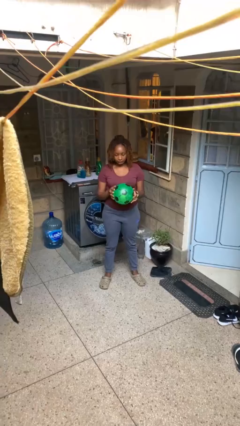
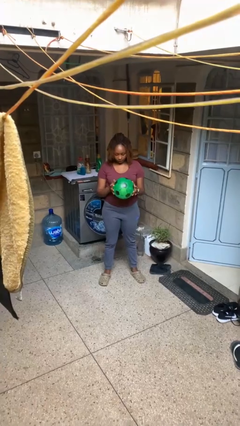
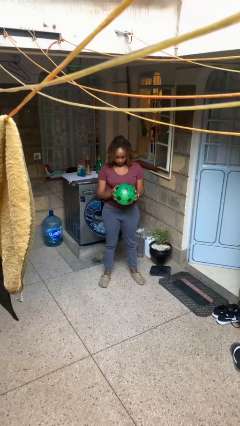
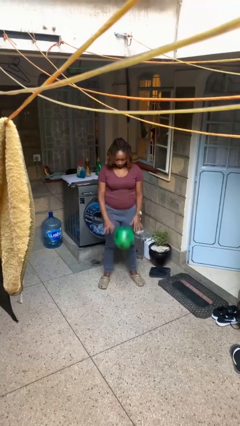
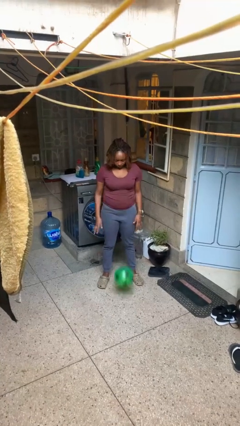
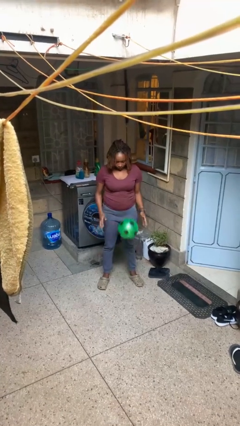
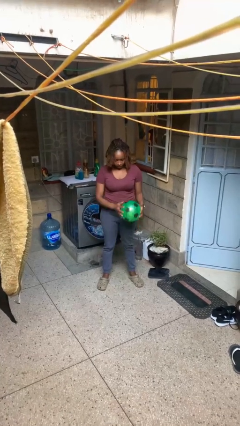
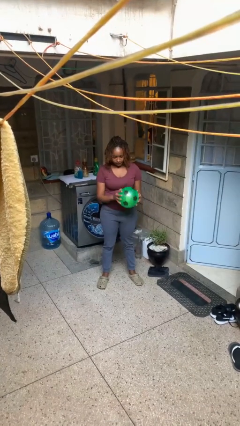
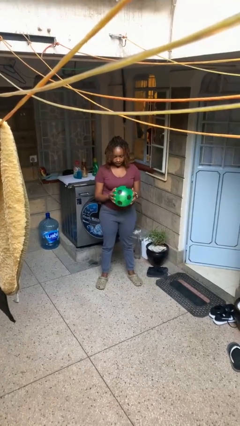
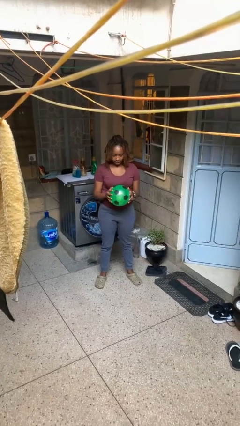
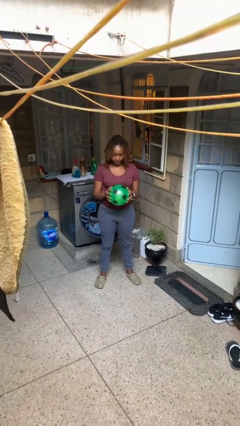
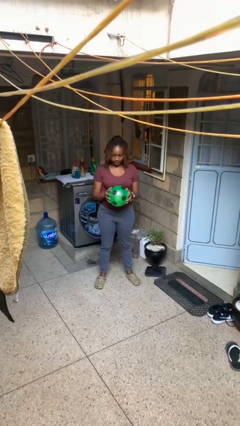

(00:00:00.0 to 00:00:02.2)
person bounces ball on floor

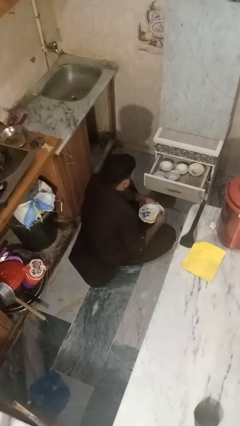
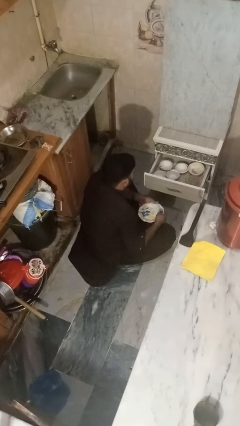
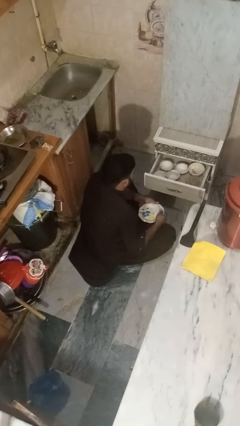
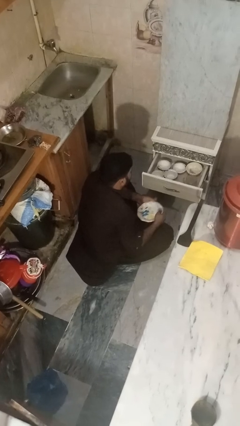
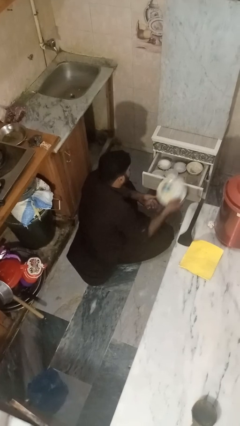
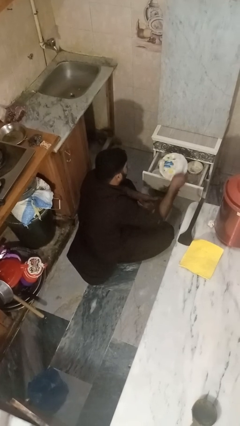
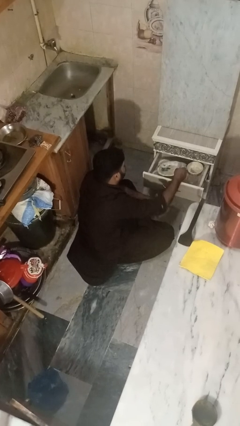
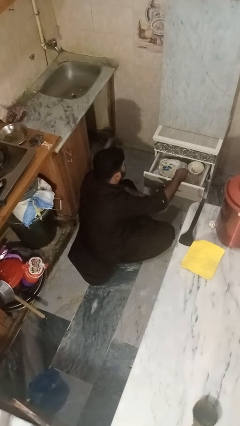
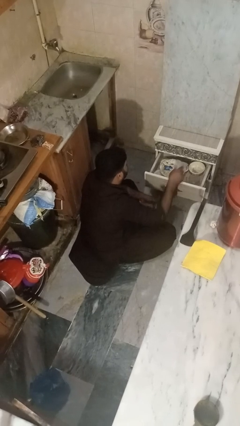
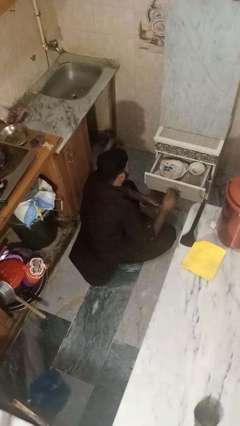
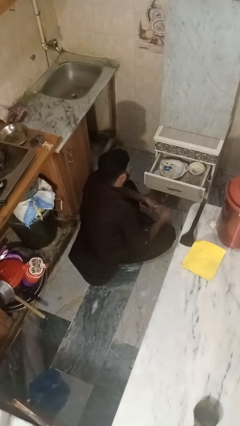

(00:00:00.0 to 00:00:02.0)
person puts object into kitchen drawer

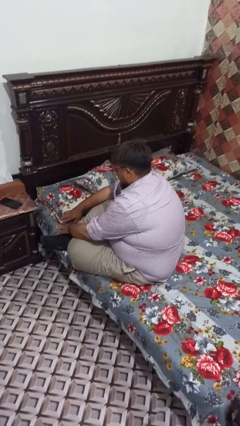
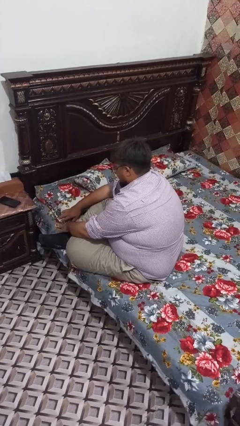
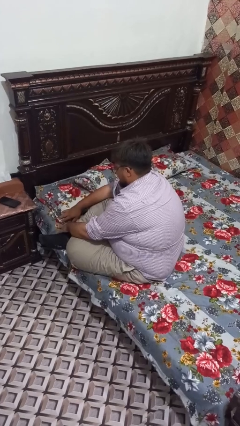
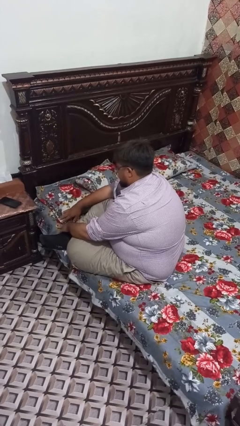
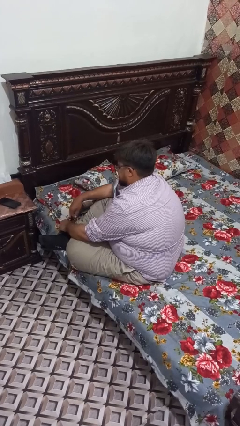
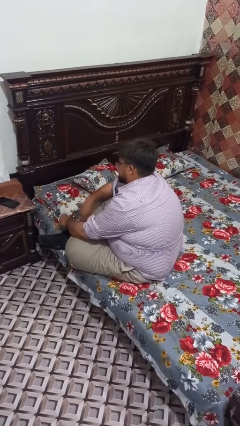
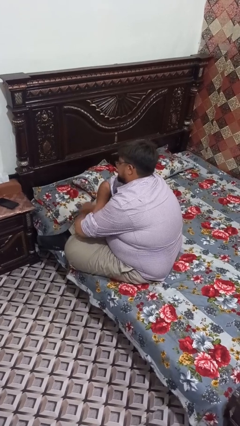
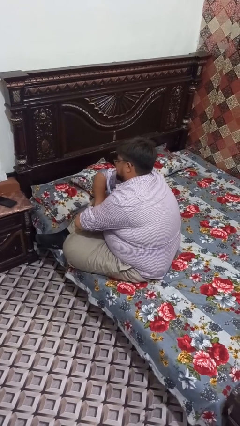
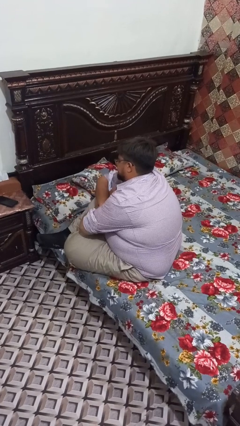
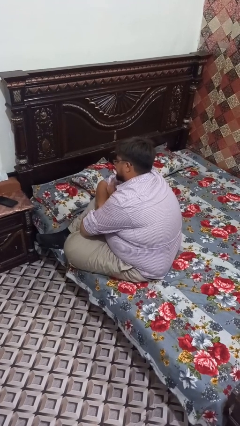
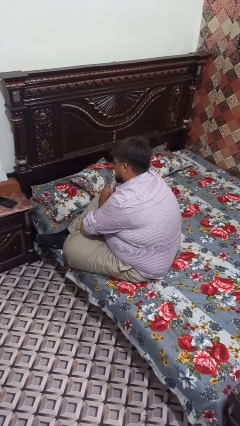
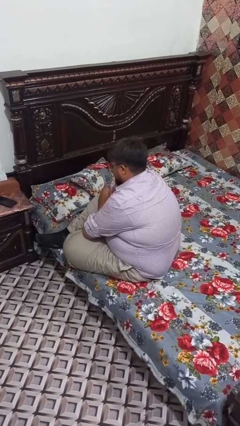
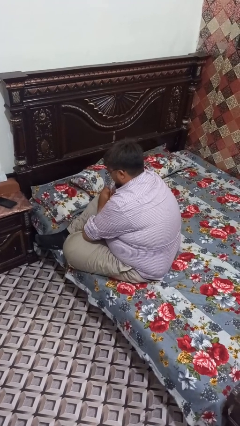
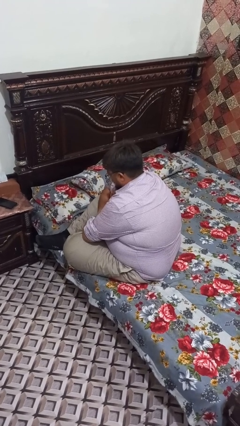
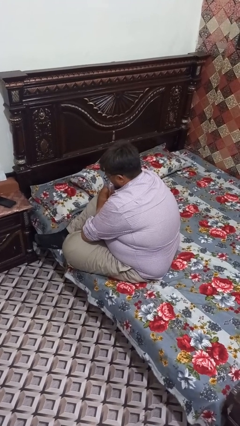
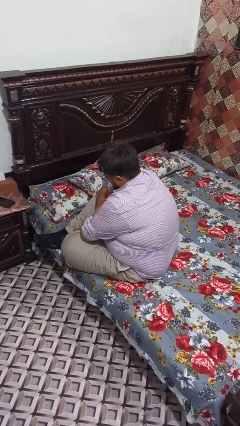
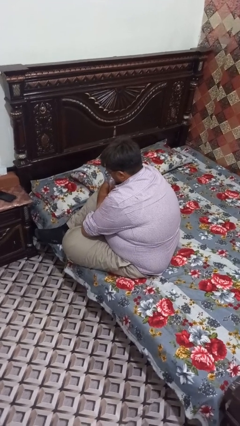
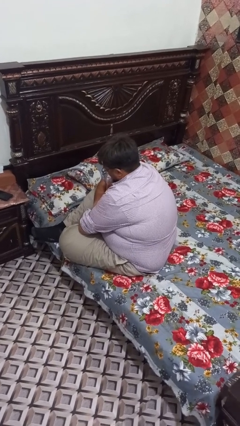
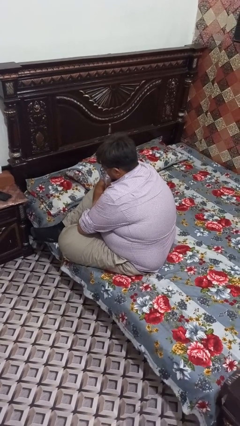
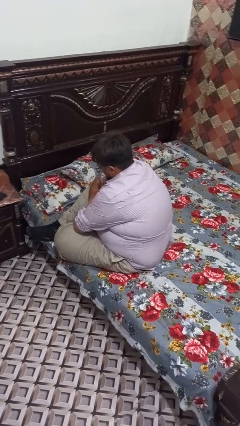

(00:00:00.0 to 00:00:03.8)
person crosses arms

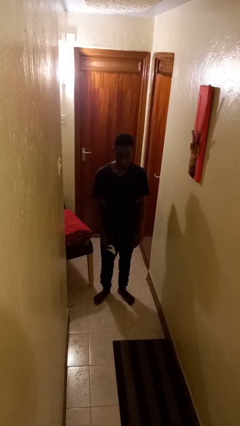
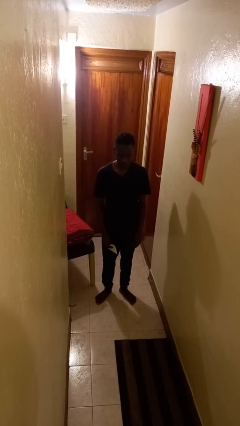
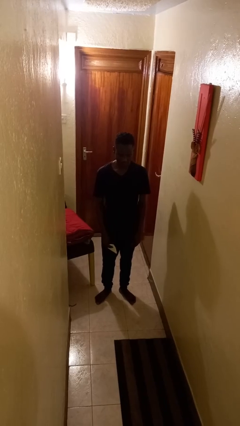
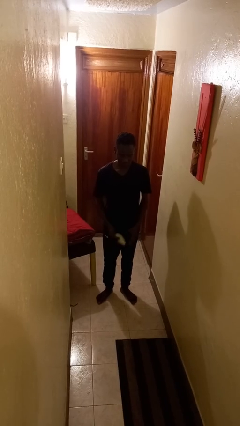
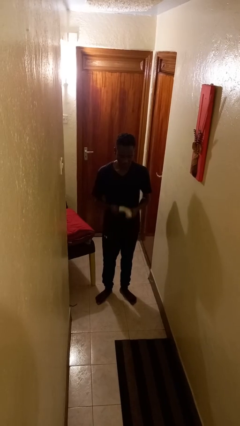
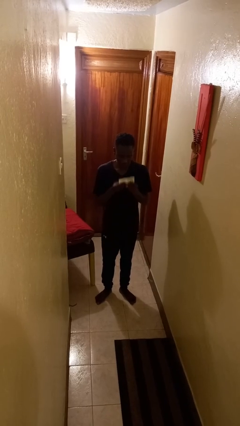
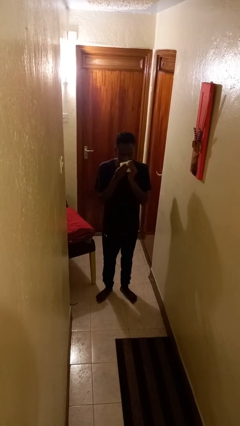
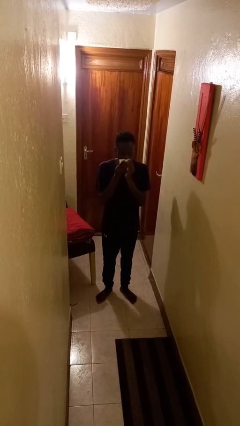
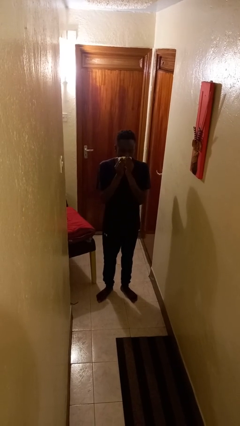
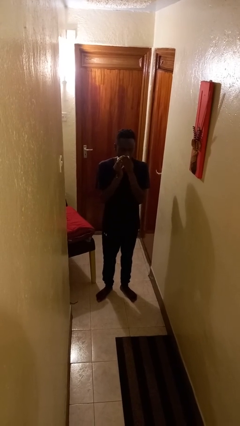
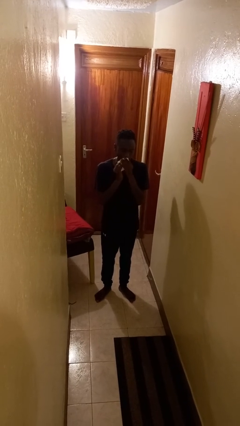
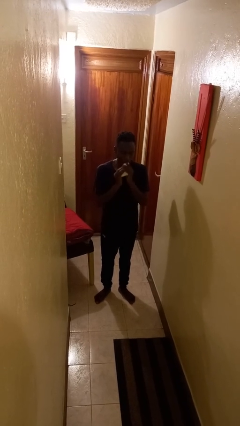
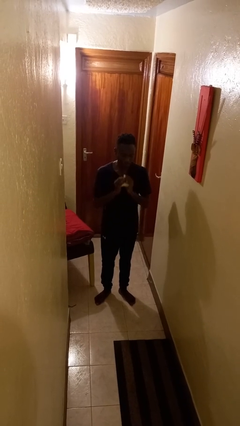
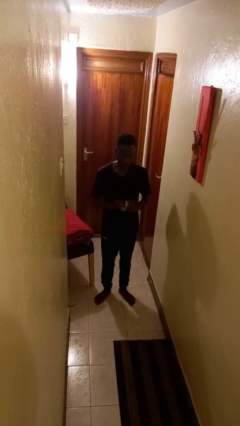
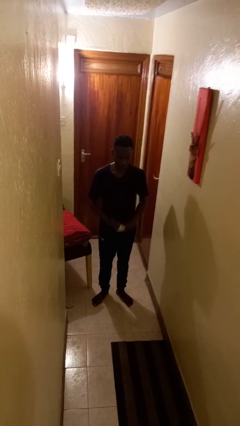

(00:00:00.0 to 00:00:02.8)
person wipes mouth with napkin

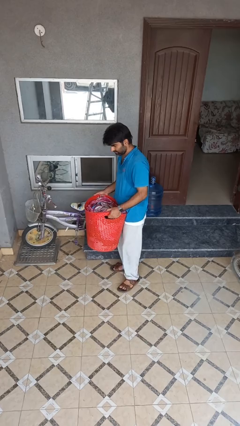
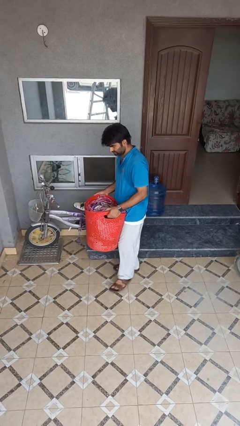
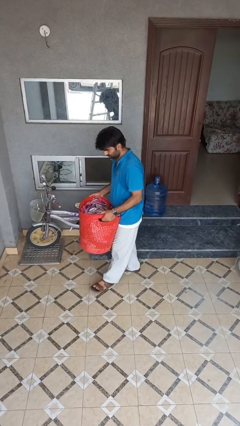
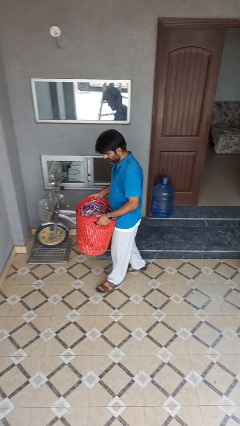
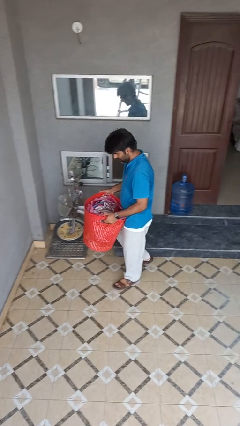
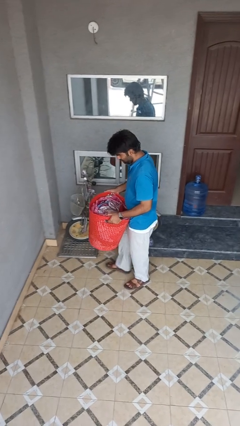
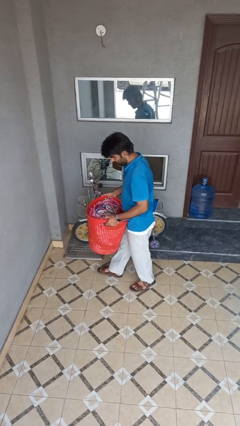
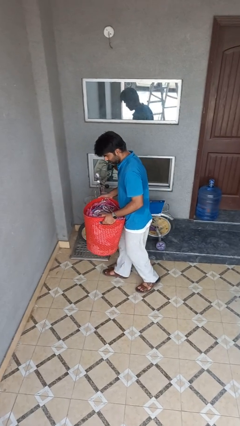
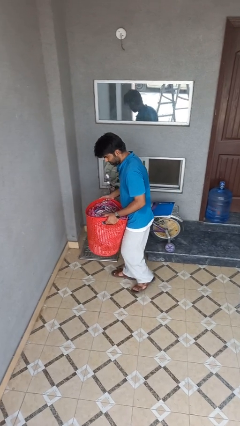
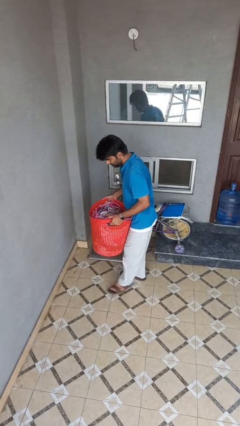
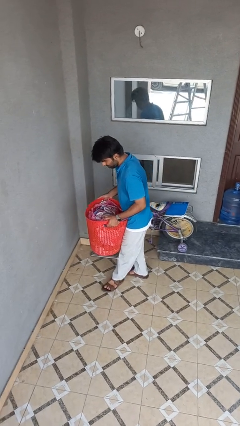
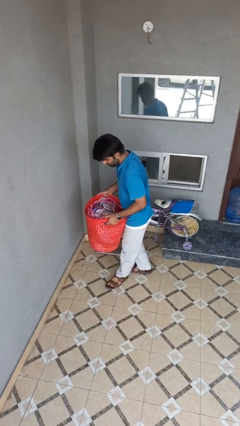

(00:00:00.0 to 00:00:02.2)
person carries laundry basket

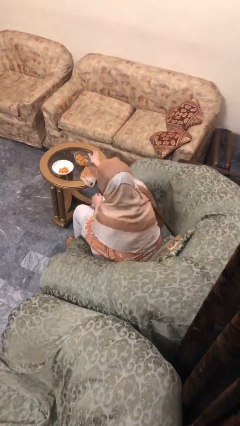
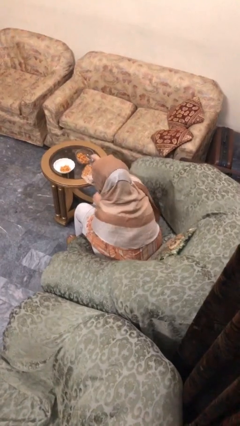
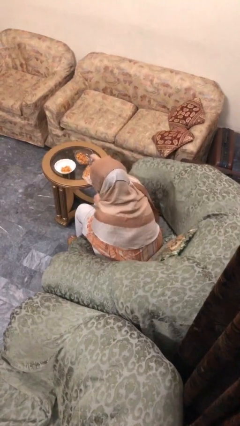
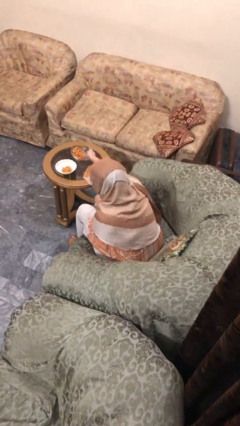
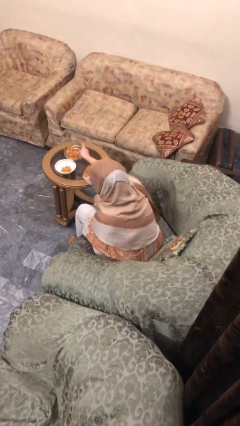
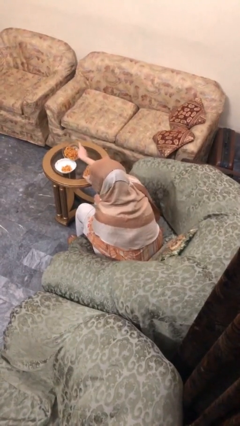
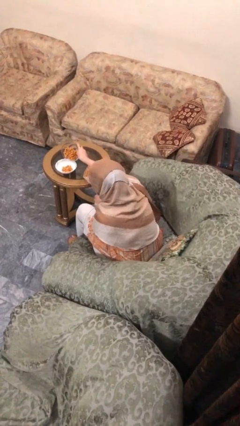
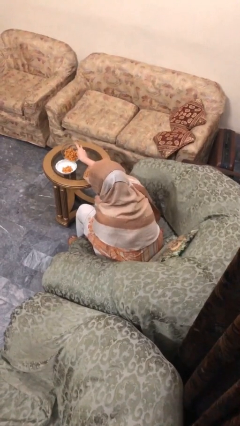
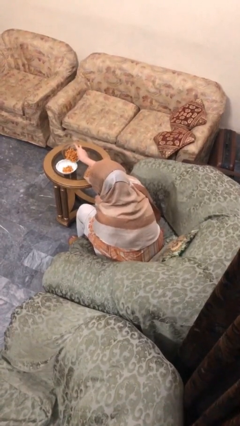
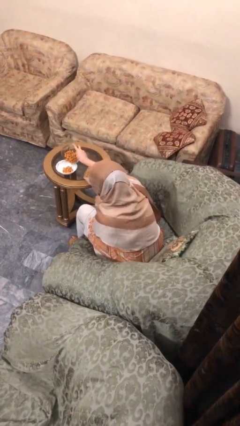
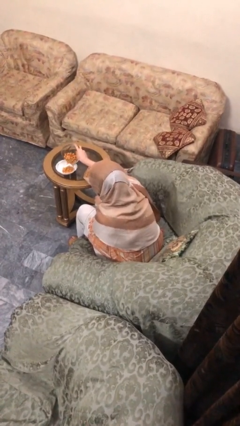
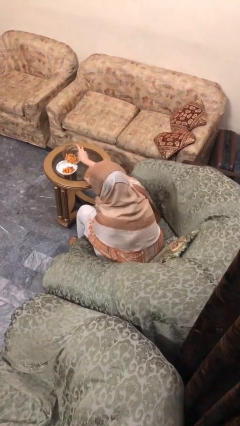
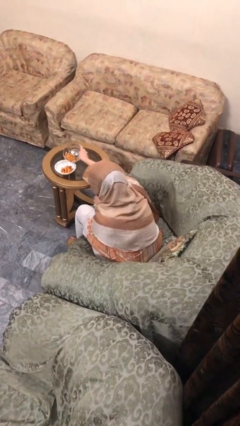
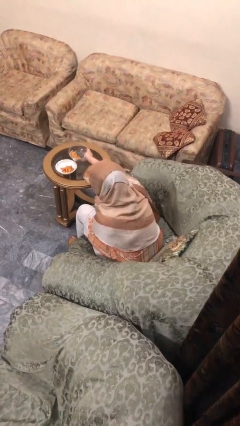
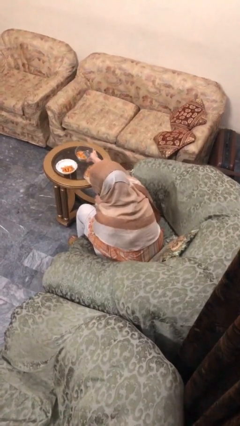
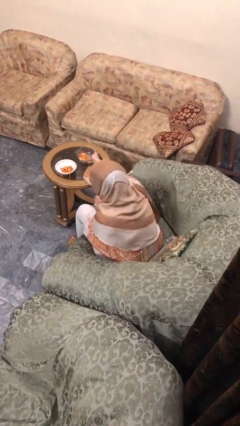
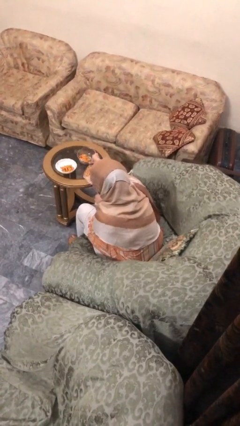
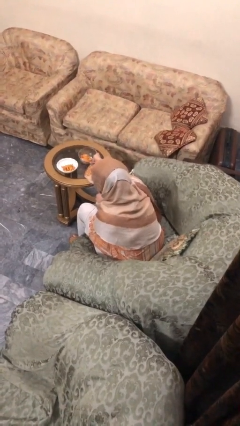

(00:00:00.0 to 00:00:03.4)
person pours into bowl

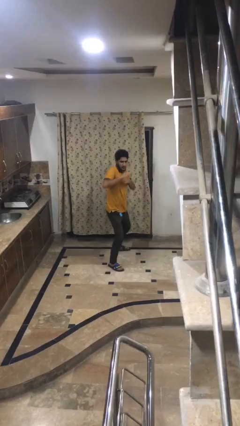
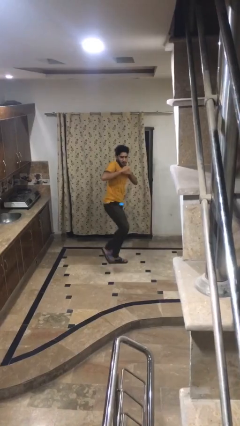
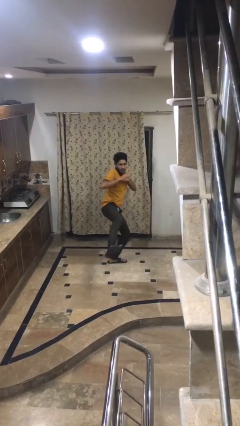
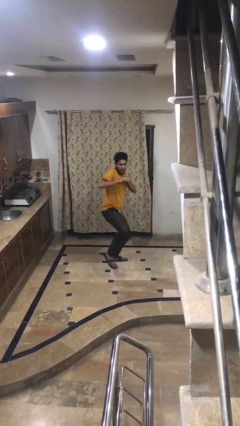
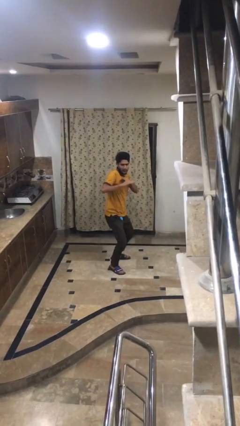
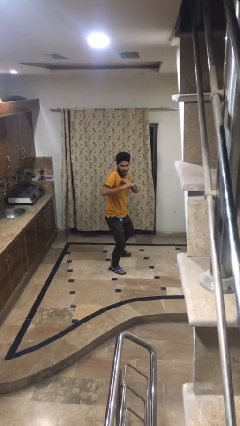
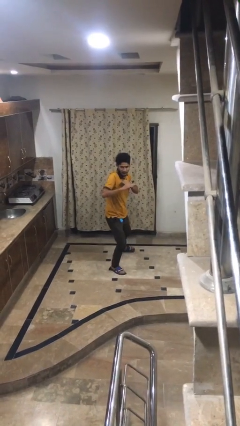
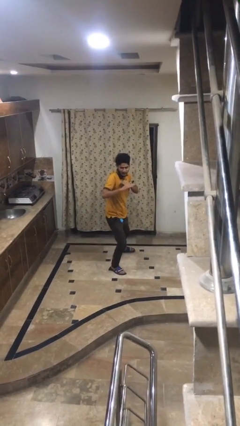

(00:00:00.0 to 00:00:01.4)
person karate kicks
